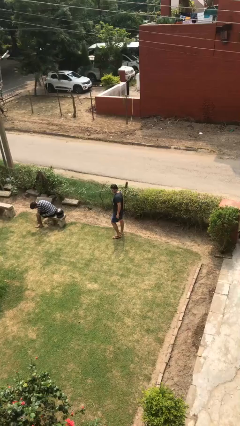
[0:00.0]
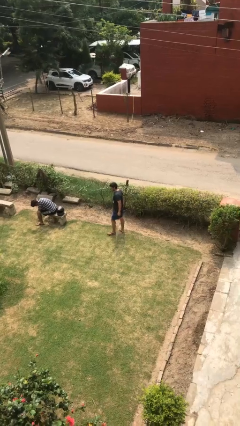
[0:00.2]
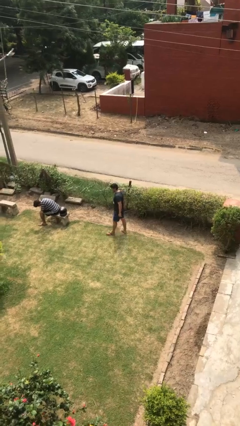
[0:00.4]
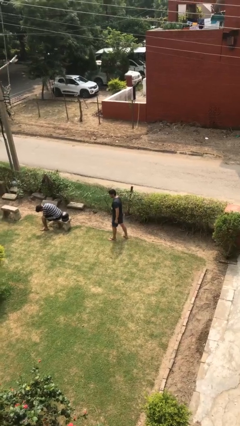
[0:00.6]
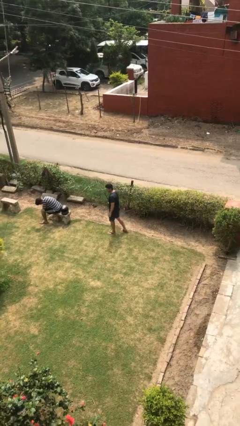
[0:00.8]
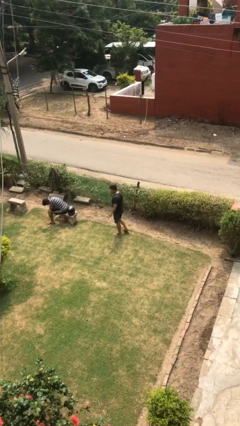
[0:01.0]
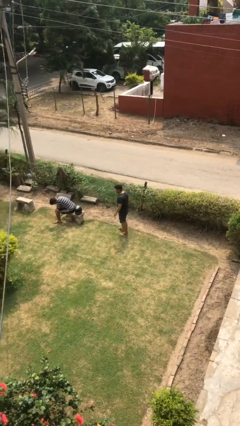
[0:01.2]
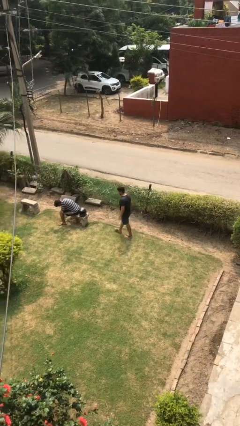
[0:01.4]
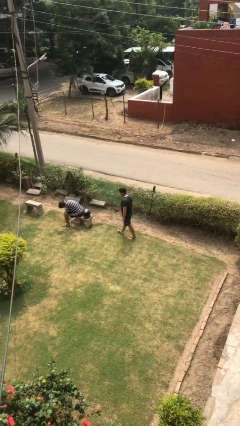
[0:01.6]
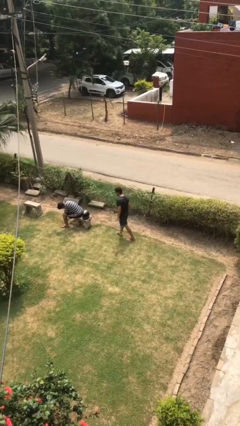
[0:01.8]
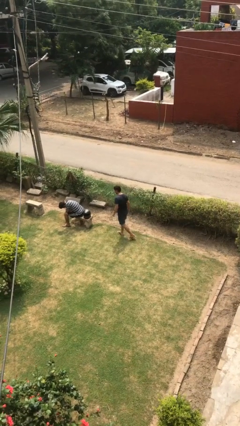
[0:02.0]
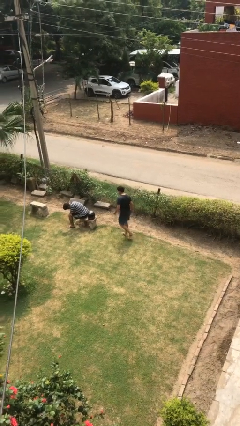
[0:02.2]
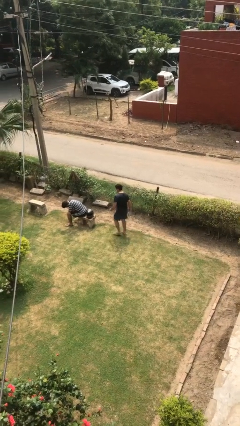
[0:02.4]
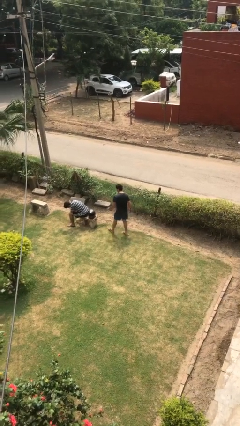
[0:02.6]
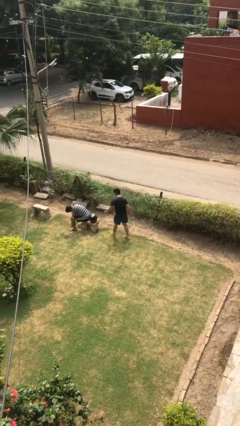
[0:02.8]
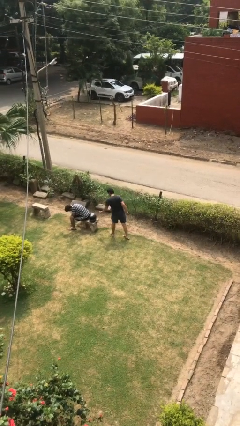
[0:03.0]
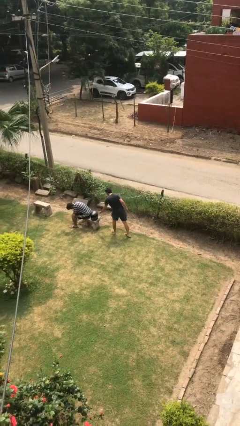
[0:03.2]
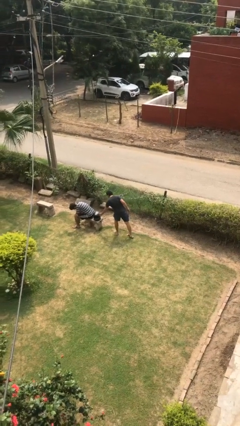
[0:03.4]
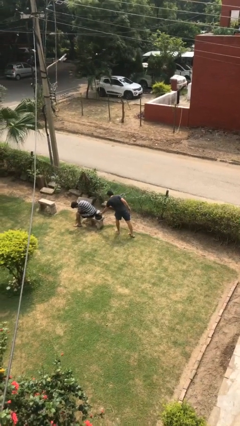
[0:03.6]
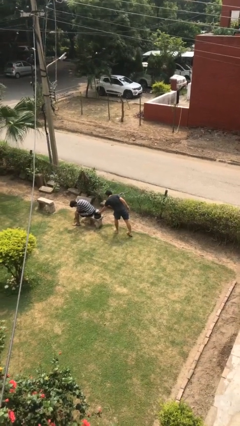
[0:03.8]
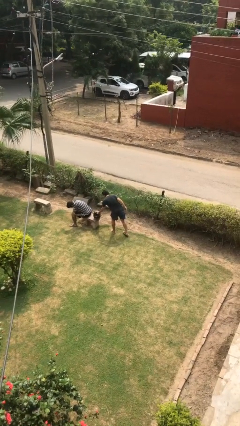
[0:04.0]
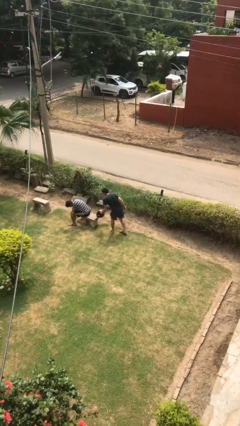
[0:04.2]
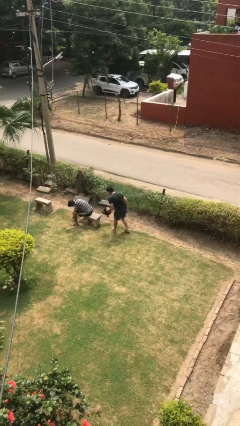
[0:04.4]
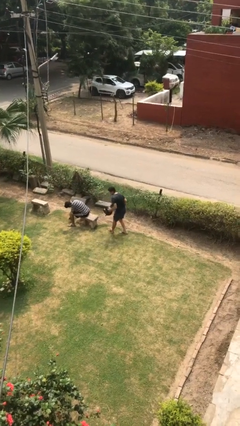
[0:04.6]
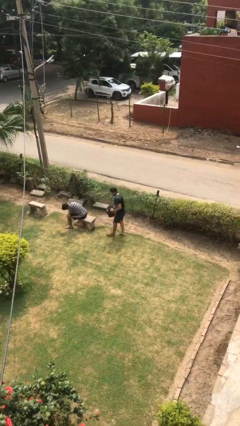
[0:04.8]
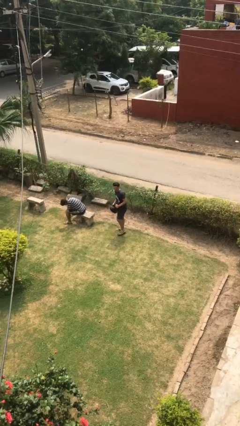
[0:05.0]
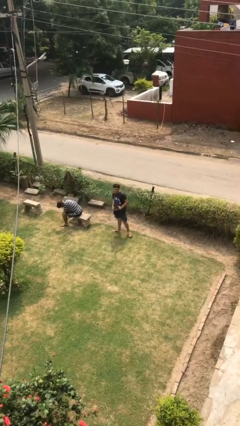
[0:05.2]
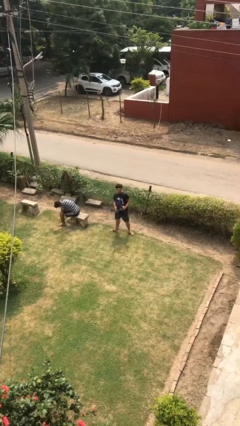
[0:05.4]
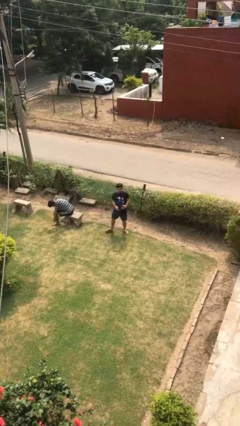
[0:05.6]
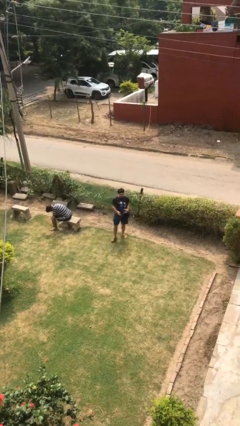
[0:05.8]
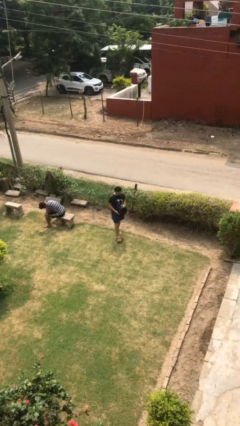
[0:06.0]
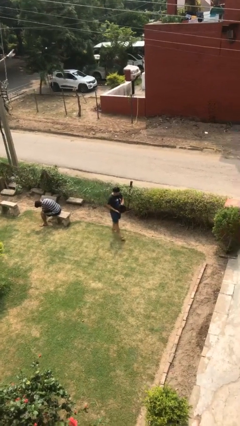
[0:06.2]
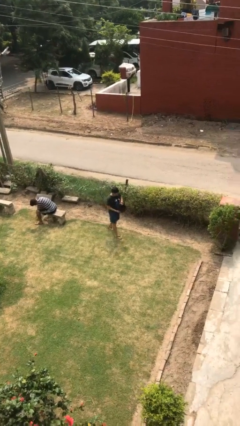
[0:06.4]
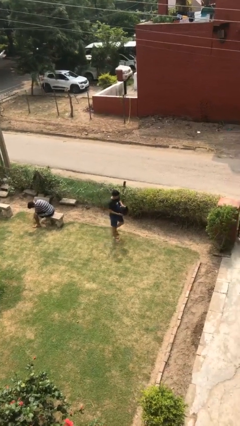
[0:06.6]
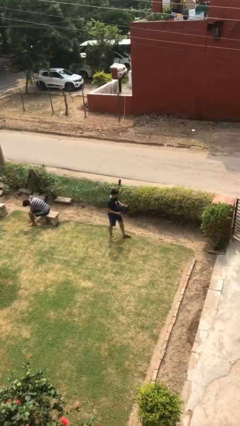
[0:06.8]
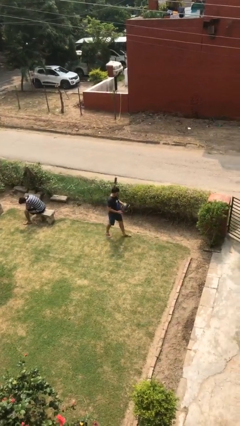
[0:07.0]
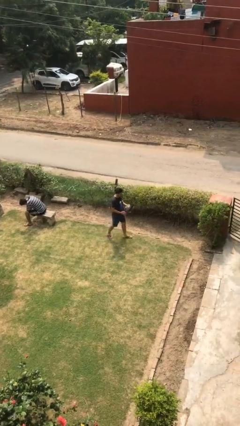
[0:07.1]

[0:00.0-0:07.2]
person steals object from person

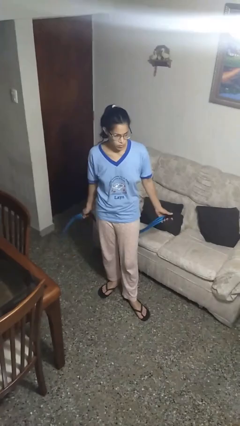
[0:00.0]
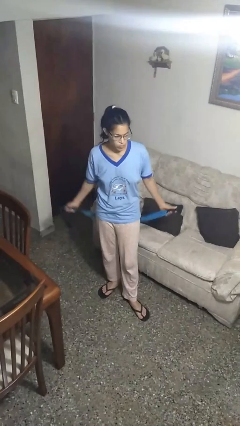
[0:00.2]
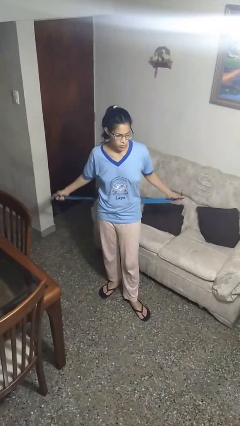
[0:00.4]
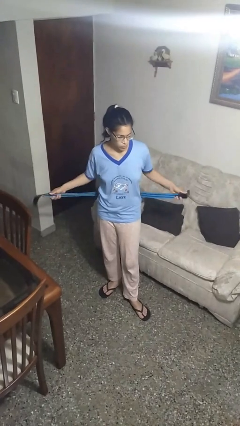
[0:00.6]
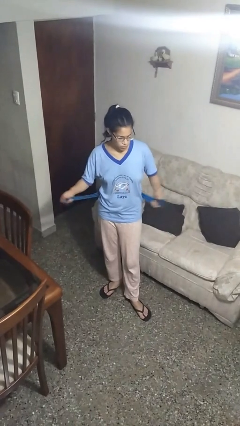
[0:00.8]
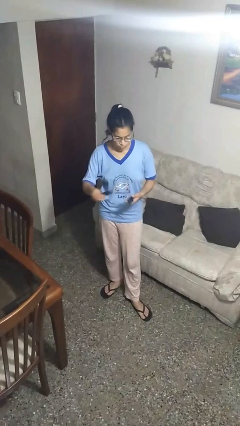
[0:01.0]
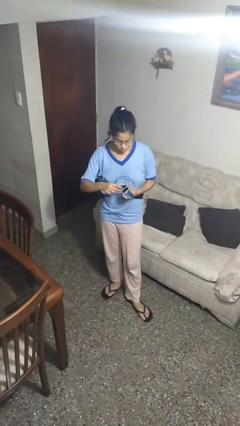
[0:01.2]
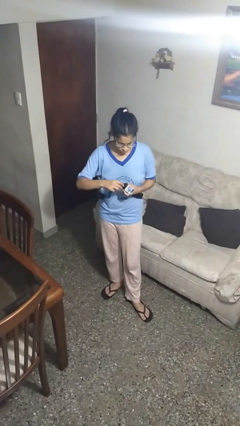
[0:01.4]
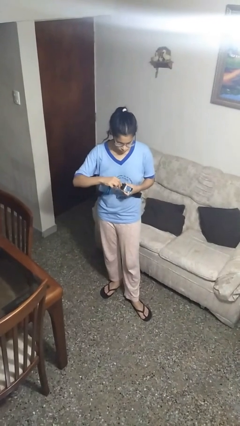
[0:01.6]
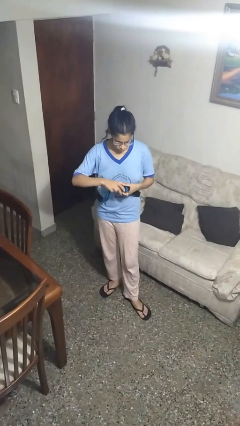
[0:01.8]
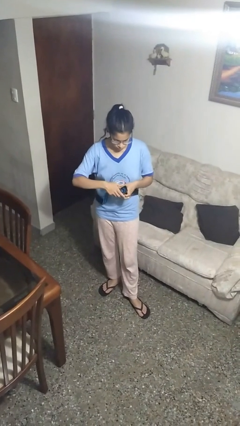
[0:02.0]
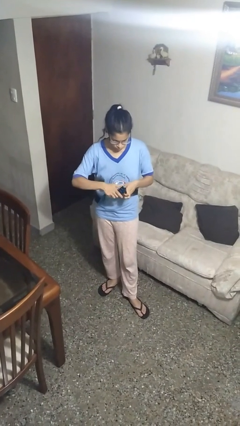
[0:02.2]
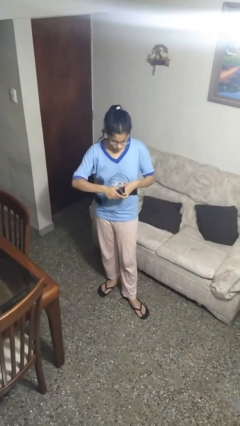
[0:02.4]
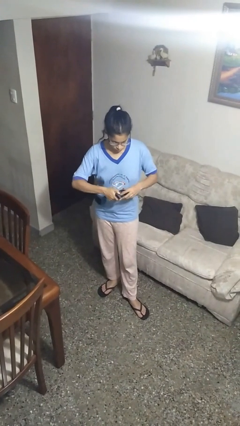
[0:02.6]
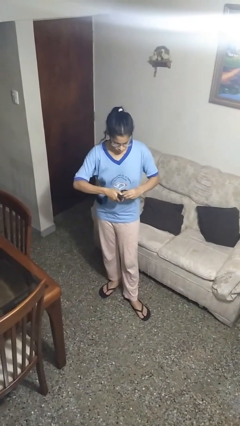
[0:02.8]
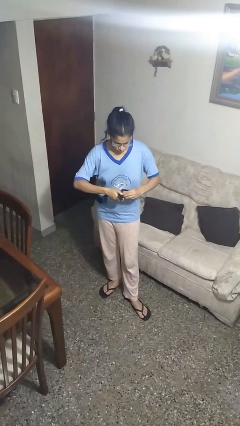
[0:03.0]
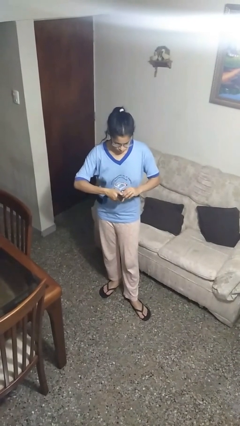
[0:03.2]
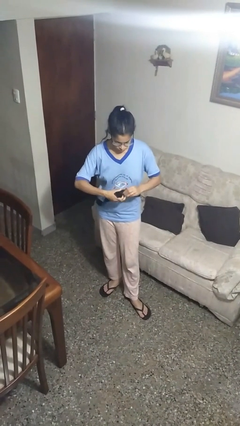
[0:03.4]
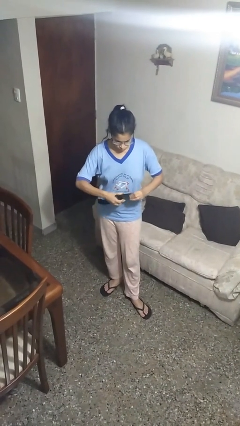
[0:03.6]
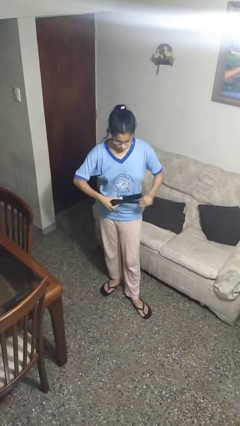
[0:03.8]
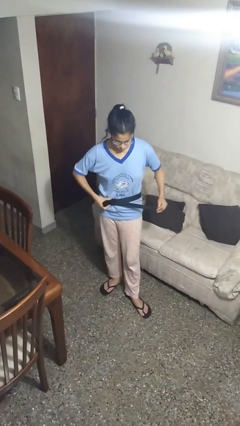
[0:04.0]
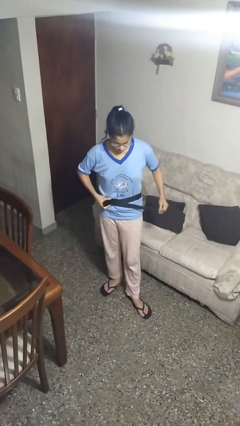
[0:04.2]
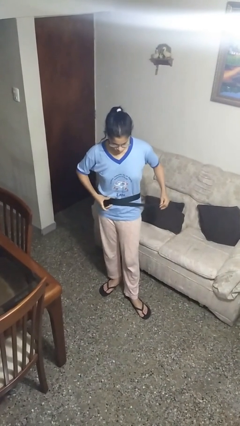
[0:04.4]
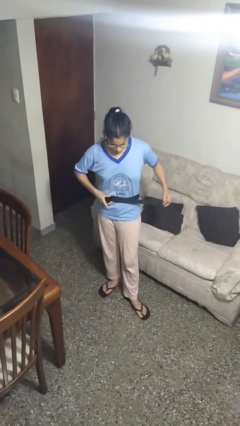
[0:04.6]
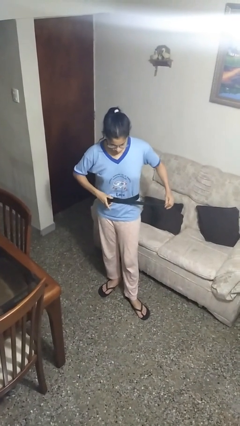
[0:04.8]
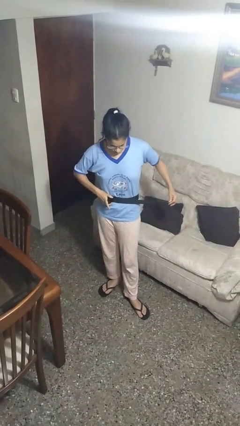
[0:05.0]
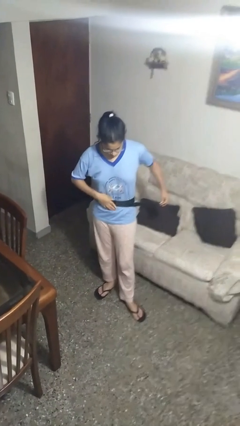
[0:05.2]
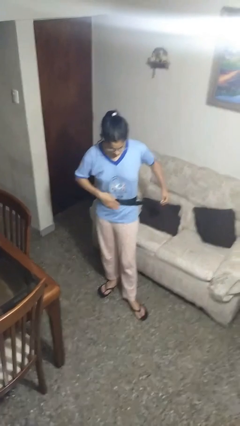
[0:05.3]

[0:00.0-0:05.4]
person puts on belt

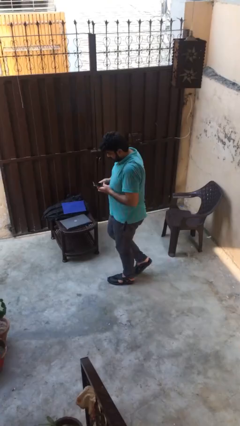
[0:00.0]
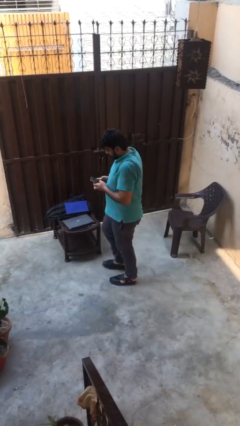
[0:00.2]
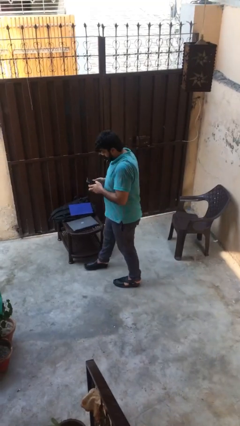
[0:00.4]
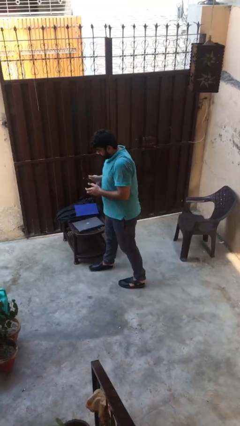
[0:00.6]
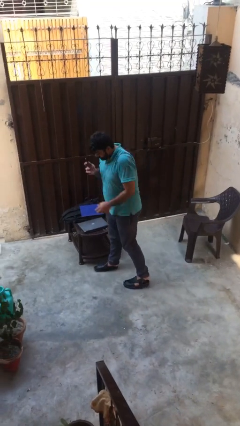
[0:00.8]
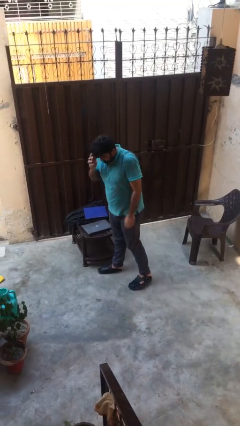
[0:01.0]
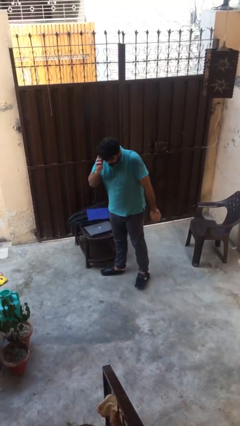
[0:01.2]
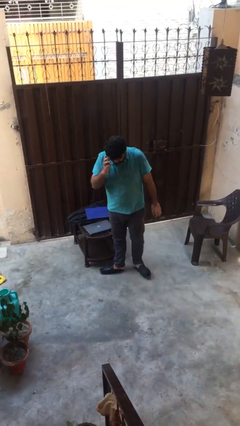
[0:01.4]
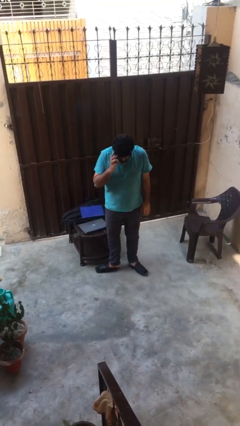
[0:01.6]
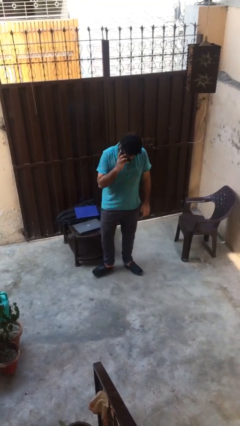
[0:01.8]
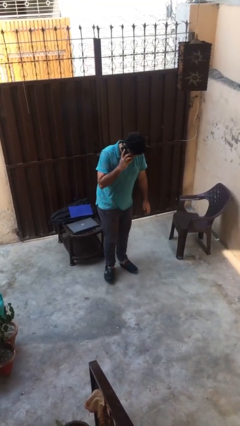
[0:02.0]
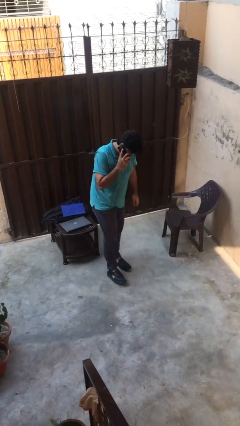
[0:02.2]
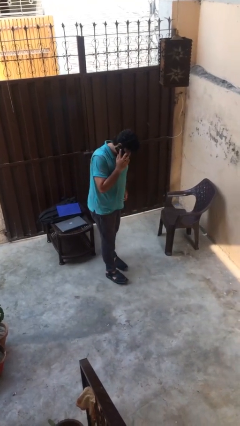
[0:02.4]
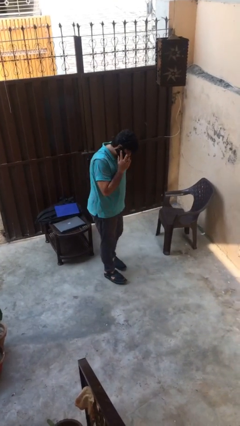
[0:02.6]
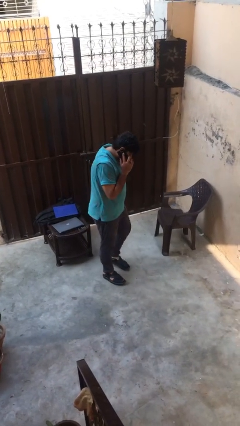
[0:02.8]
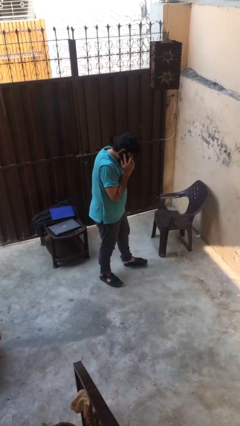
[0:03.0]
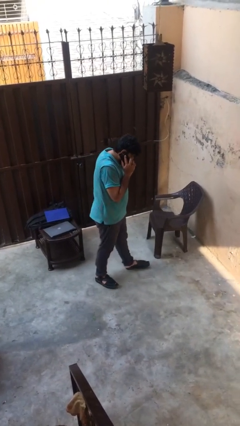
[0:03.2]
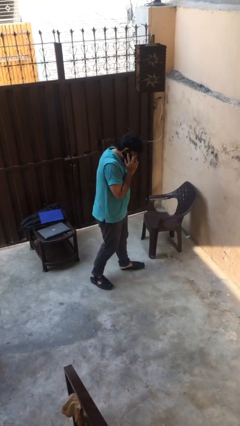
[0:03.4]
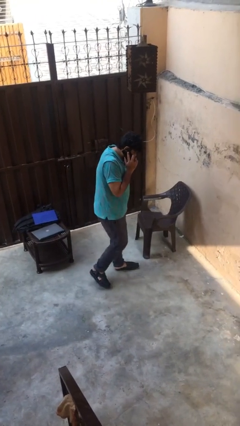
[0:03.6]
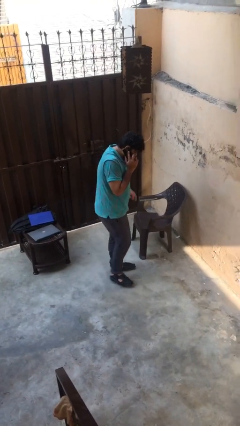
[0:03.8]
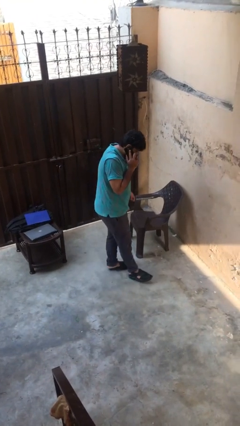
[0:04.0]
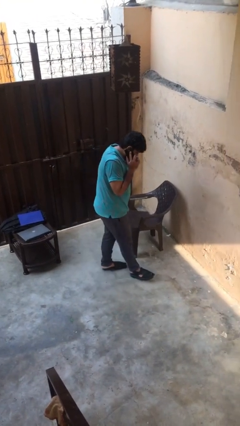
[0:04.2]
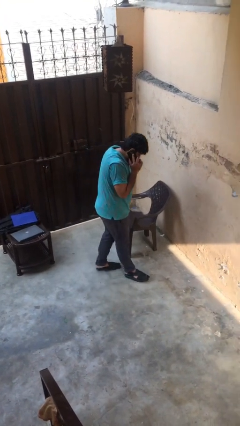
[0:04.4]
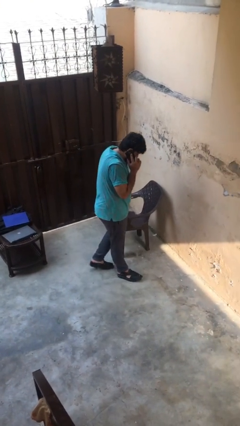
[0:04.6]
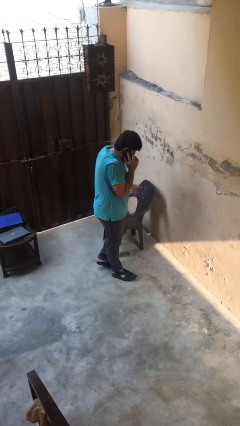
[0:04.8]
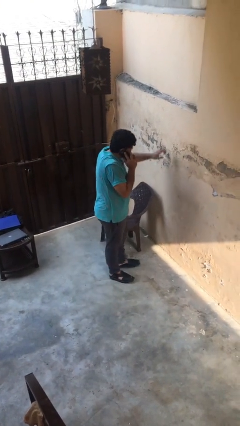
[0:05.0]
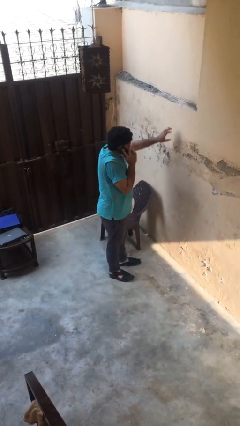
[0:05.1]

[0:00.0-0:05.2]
person talks on phone
